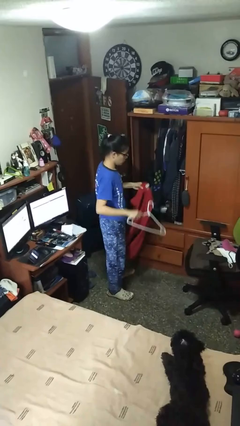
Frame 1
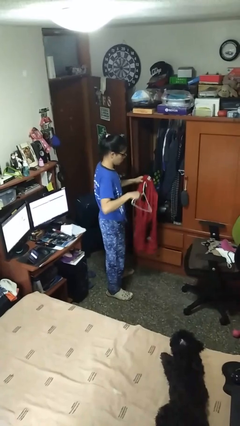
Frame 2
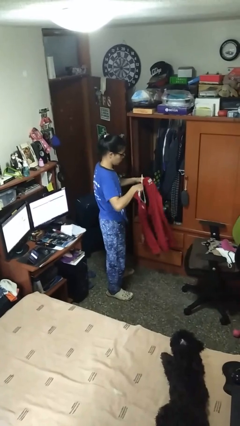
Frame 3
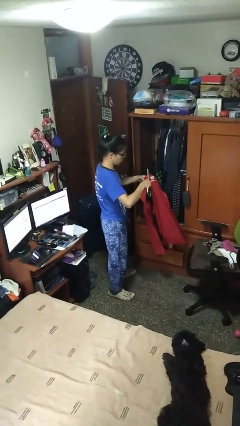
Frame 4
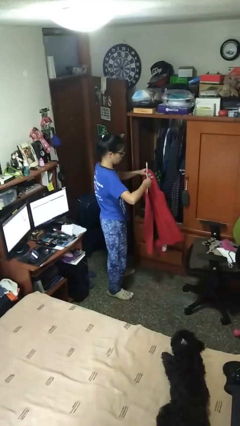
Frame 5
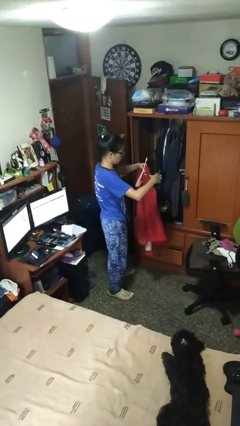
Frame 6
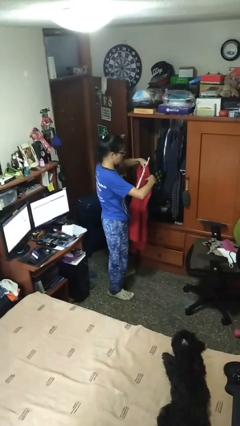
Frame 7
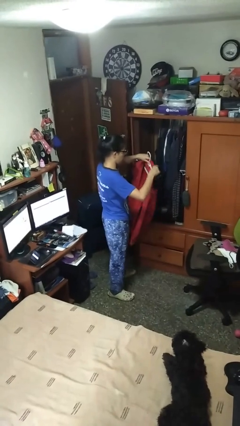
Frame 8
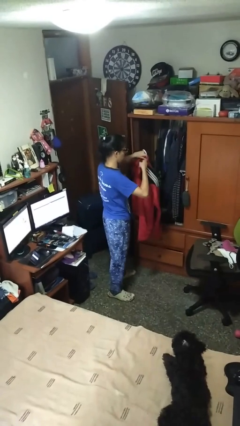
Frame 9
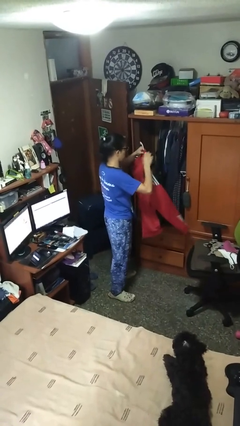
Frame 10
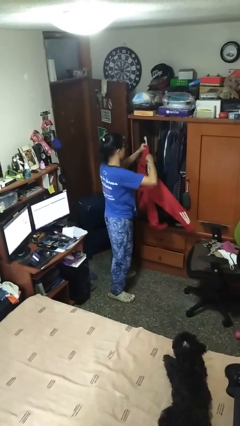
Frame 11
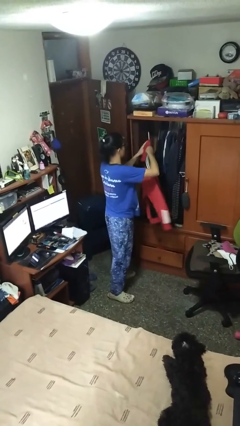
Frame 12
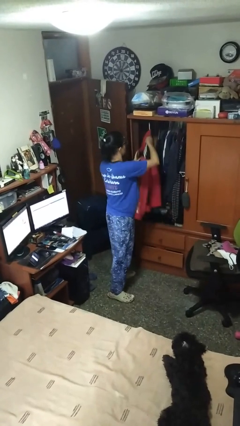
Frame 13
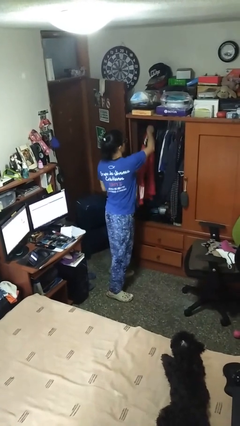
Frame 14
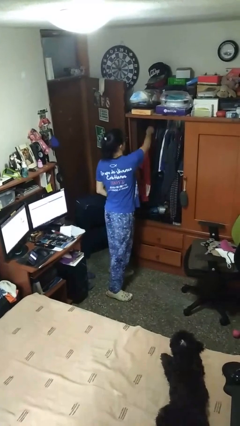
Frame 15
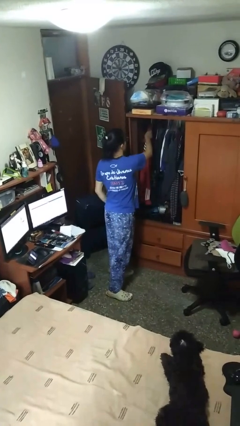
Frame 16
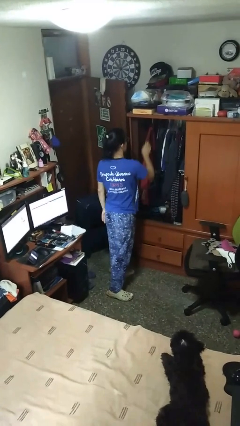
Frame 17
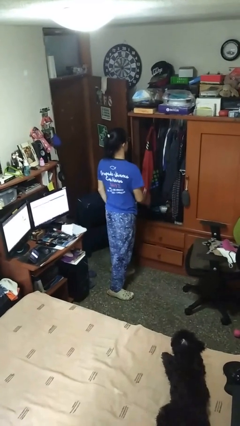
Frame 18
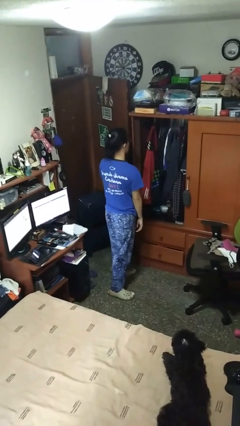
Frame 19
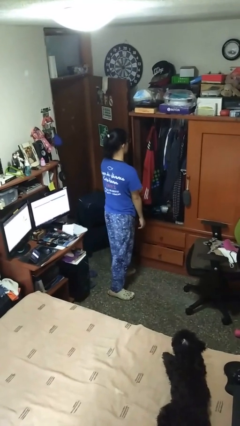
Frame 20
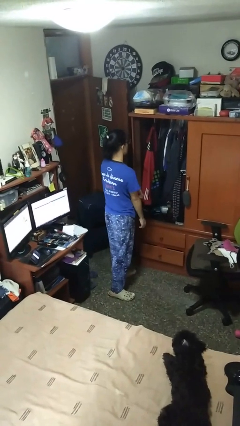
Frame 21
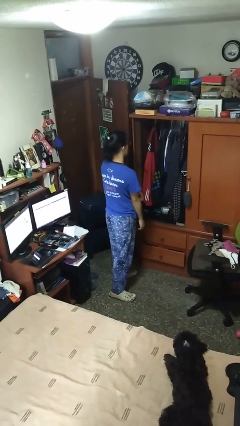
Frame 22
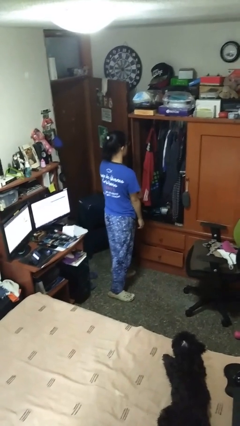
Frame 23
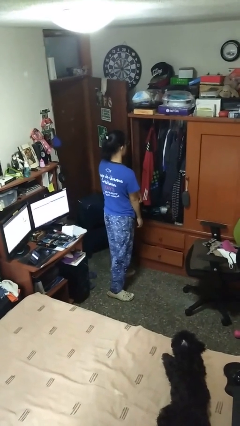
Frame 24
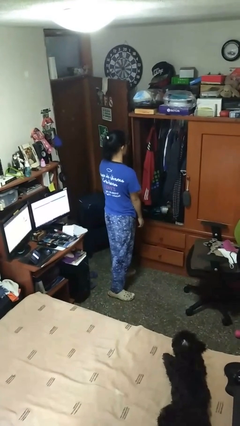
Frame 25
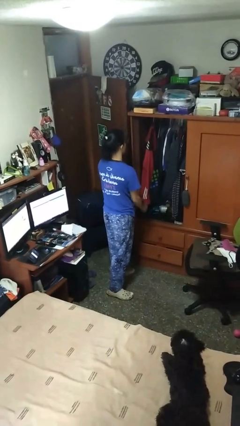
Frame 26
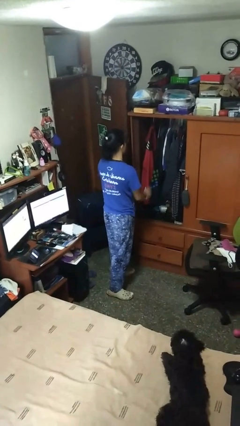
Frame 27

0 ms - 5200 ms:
person puts clothes into closet

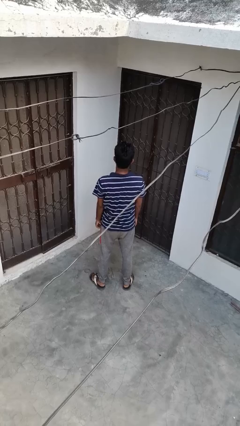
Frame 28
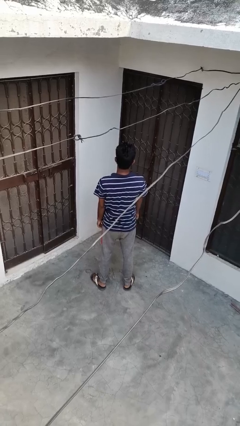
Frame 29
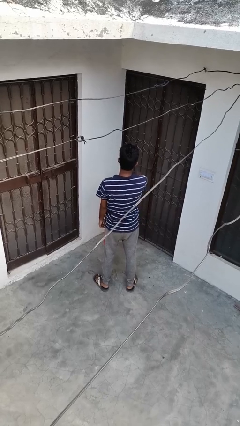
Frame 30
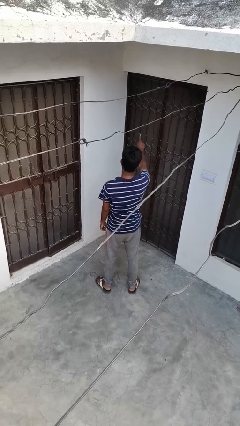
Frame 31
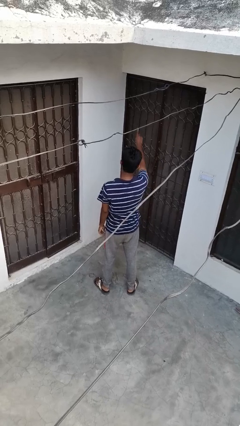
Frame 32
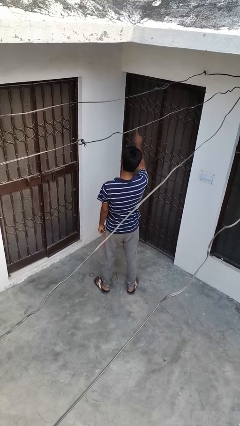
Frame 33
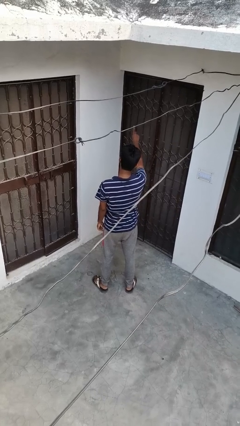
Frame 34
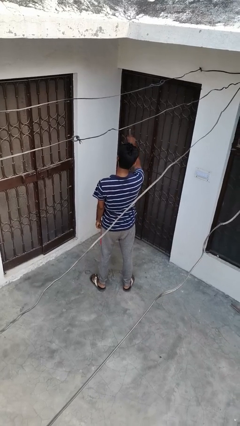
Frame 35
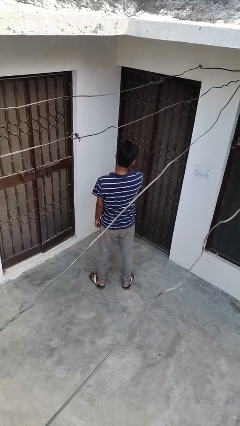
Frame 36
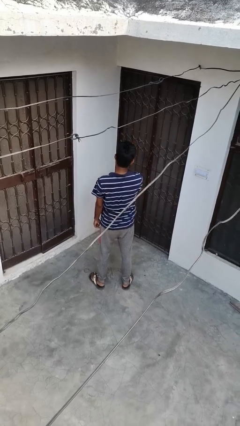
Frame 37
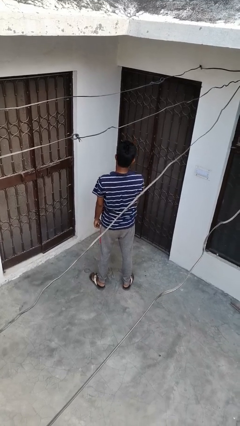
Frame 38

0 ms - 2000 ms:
person gestures number one

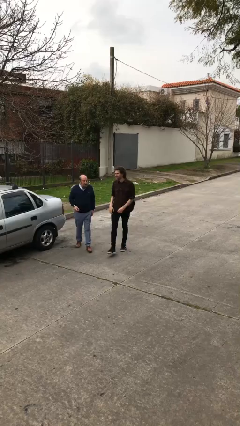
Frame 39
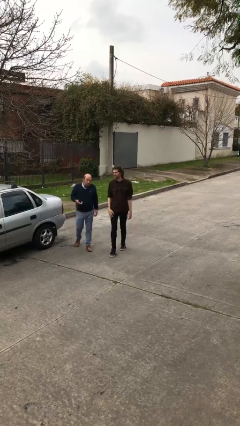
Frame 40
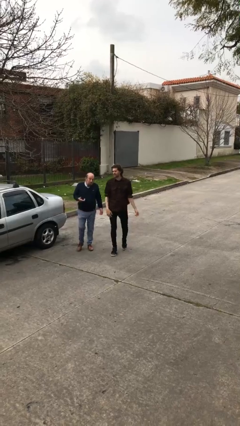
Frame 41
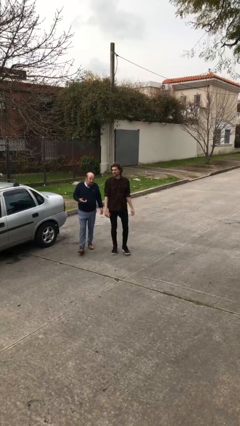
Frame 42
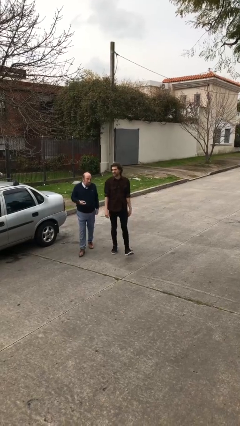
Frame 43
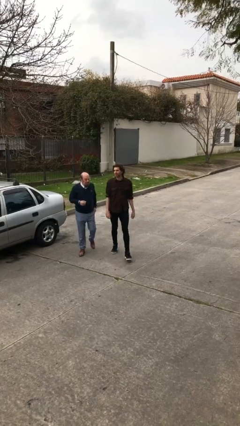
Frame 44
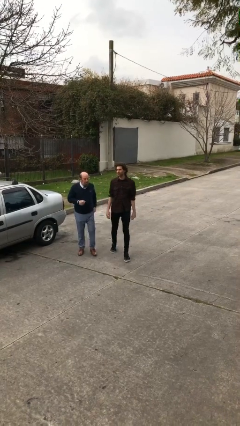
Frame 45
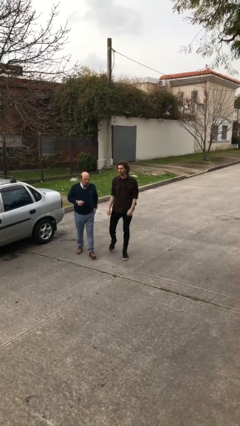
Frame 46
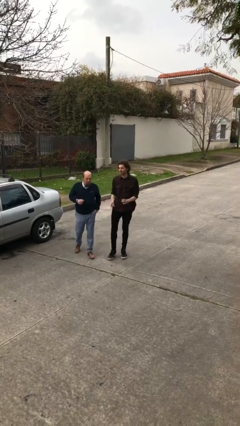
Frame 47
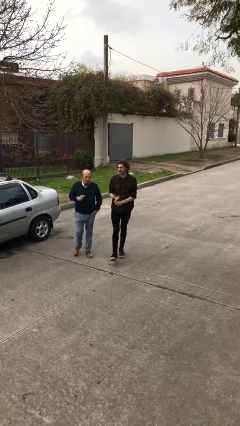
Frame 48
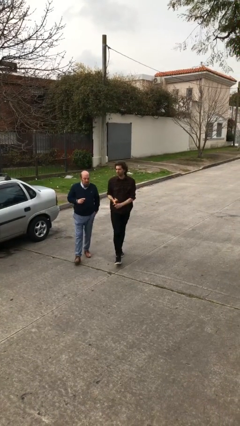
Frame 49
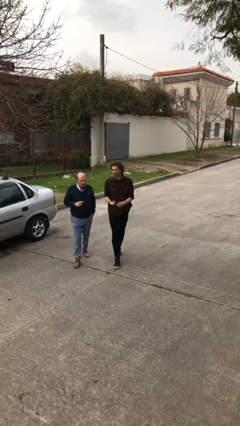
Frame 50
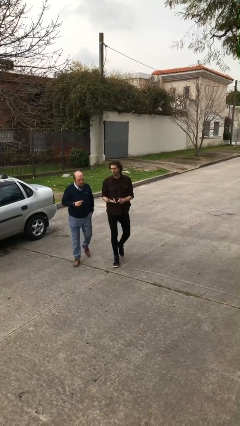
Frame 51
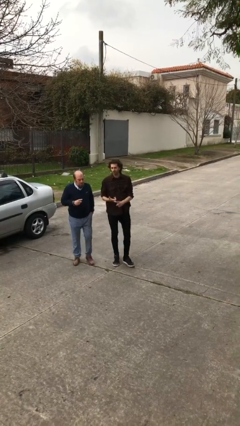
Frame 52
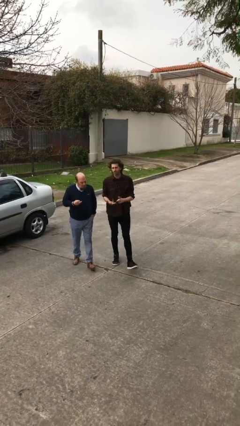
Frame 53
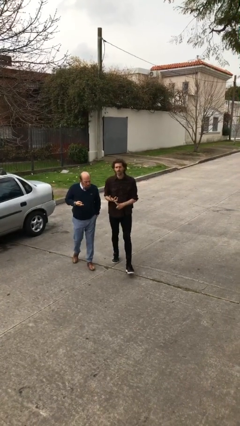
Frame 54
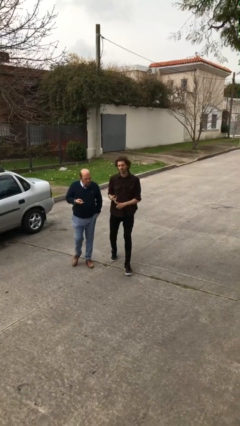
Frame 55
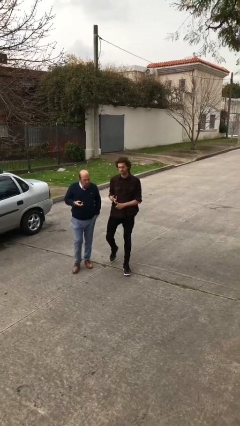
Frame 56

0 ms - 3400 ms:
person talks to person

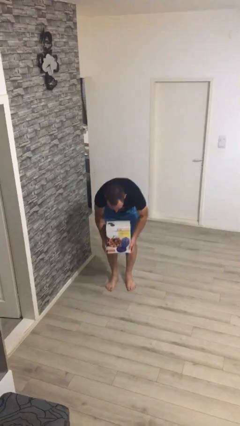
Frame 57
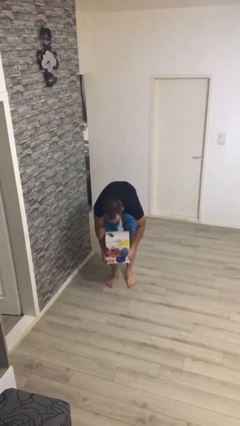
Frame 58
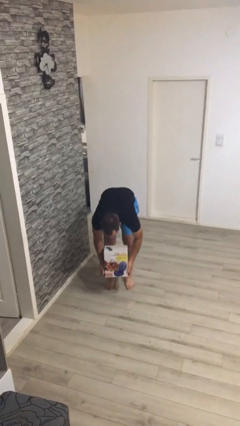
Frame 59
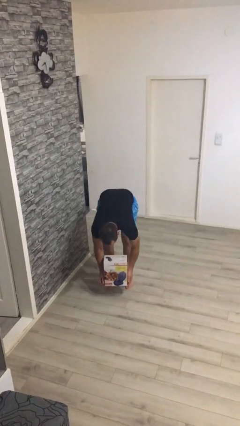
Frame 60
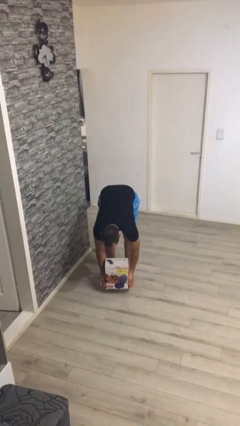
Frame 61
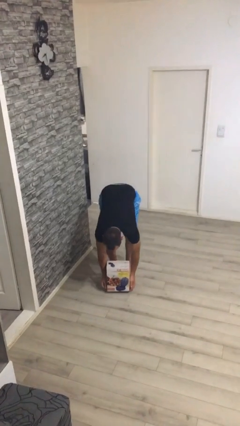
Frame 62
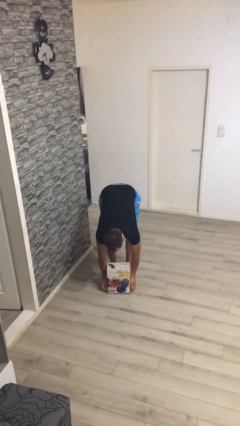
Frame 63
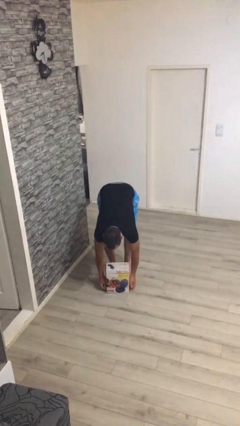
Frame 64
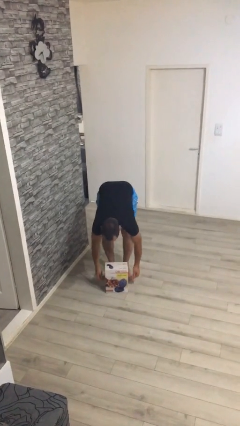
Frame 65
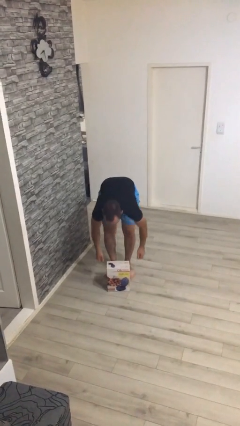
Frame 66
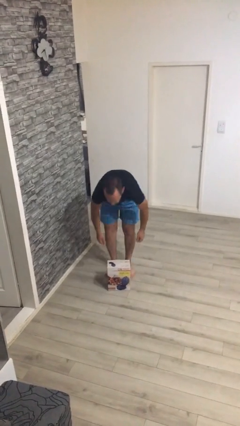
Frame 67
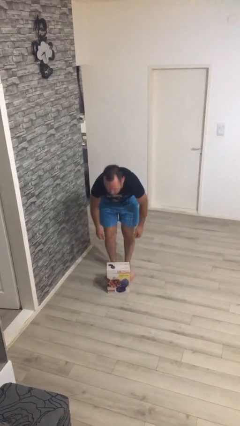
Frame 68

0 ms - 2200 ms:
person puts down object on floor

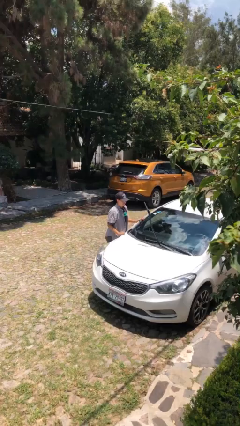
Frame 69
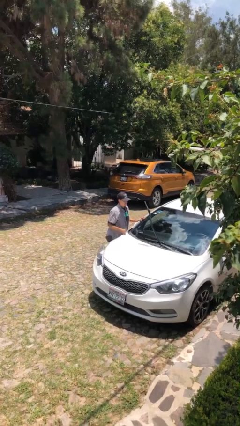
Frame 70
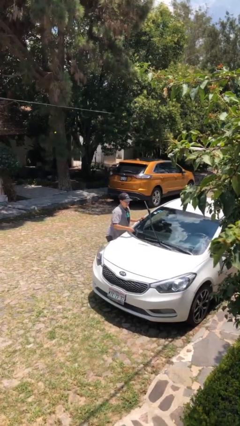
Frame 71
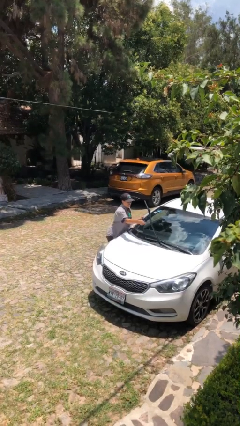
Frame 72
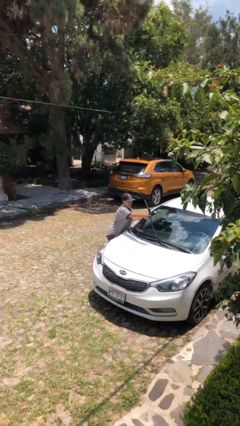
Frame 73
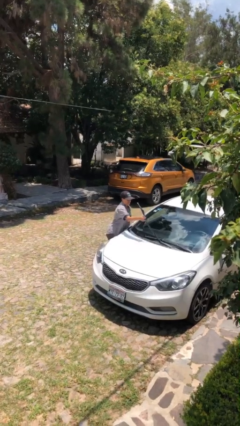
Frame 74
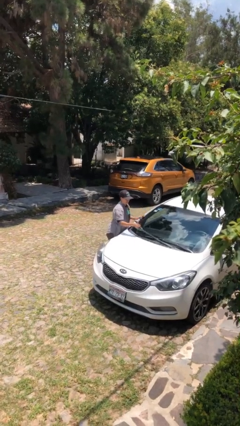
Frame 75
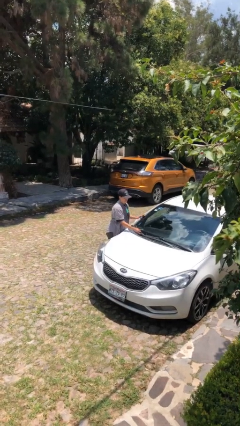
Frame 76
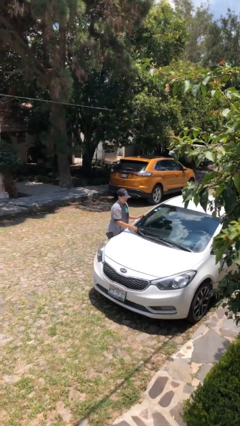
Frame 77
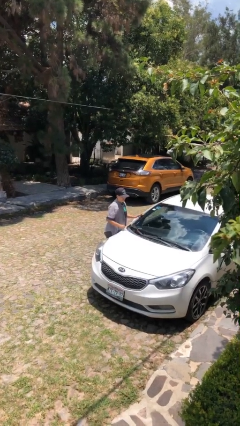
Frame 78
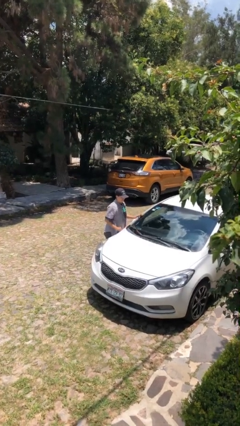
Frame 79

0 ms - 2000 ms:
person flips down car wipers

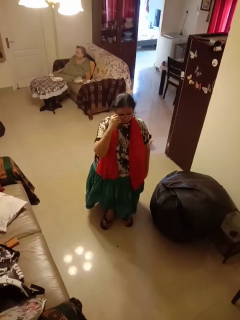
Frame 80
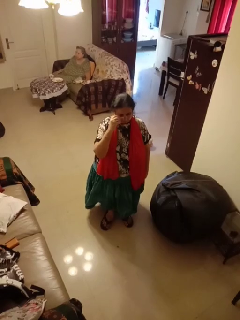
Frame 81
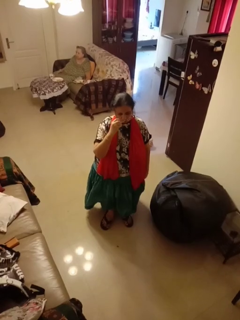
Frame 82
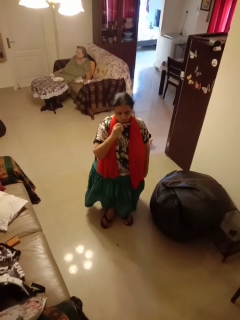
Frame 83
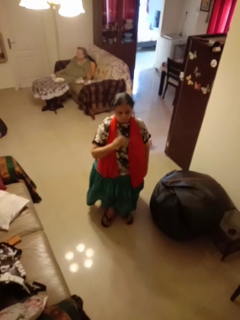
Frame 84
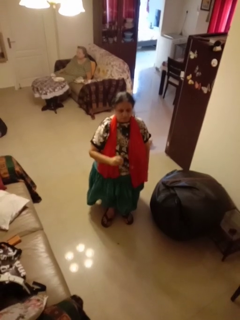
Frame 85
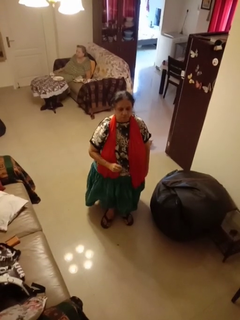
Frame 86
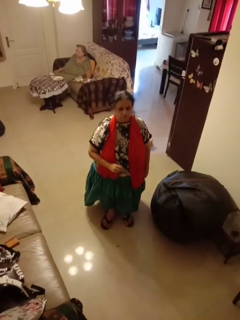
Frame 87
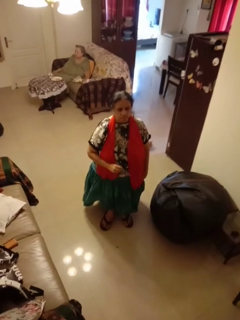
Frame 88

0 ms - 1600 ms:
person takes off glasses

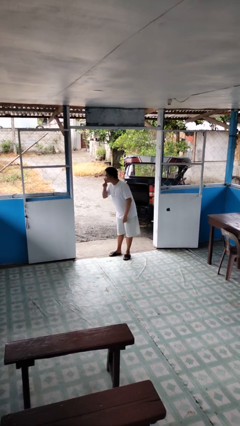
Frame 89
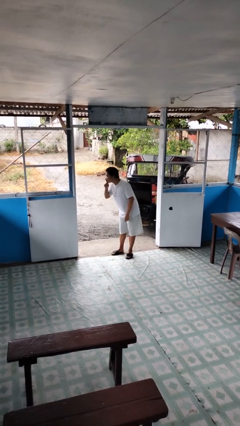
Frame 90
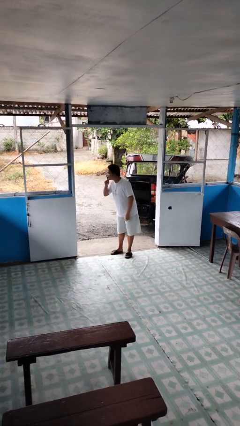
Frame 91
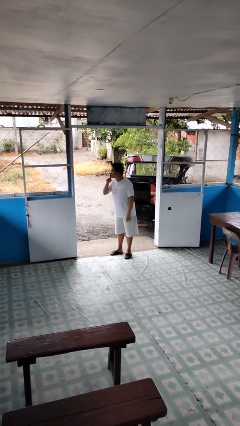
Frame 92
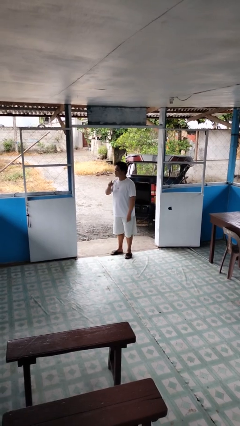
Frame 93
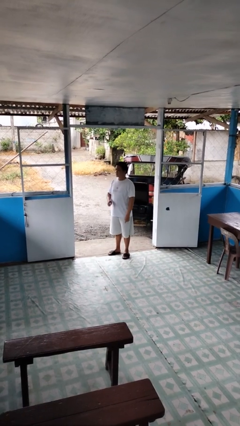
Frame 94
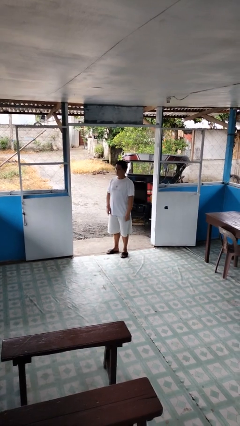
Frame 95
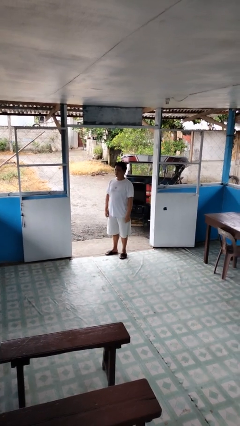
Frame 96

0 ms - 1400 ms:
person gestures be quiet
